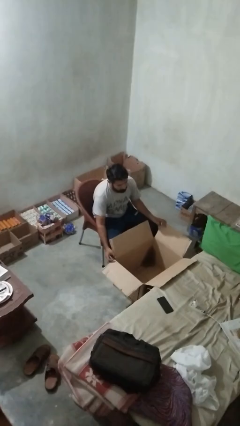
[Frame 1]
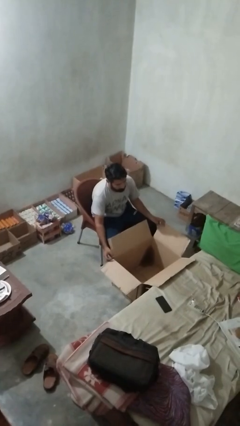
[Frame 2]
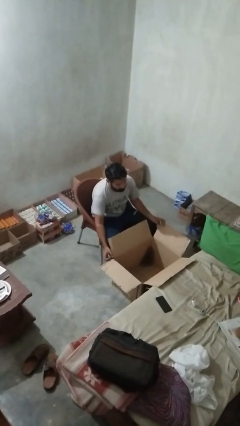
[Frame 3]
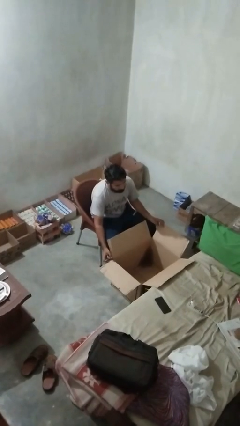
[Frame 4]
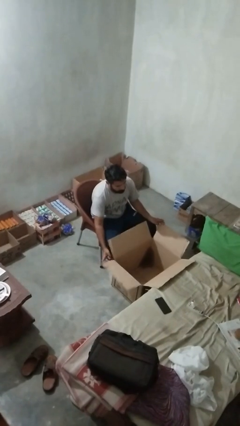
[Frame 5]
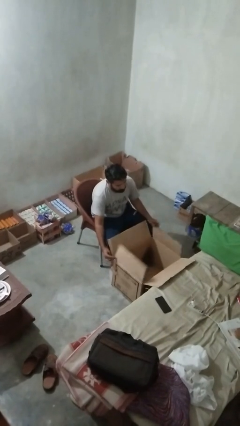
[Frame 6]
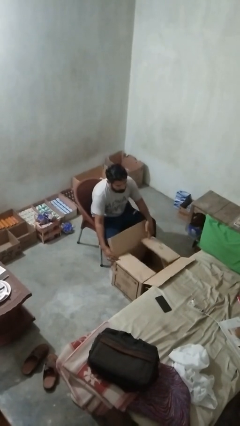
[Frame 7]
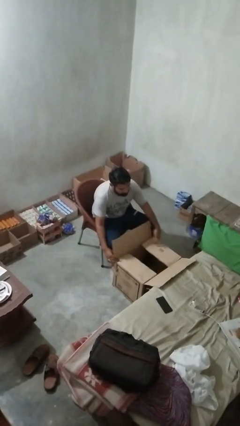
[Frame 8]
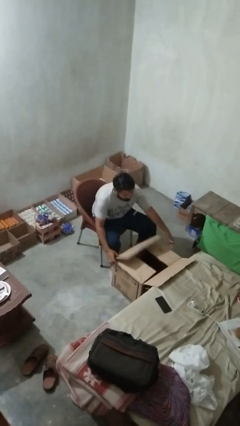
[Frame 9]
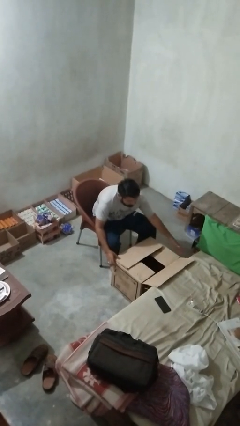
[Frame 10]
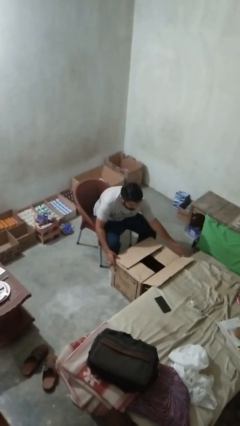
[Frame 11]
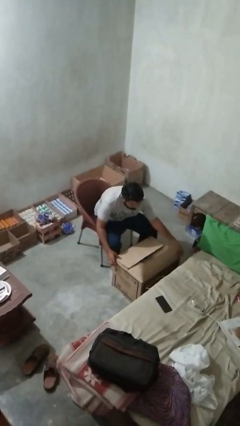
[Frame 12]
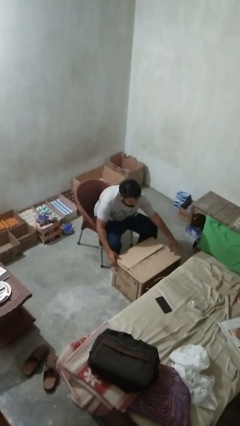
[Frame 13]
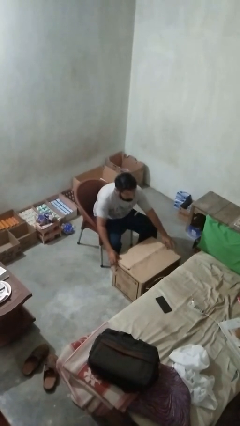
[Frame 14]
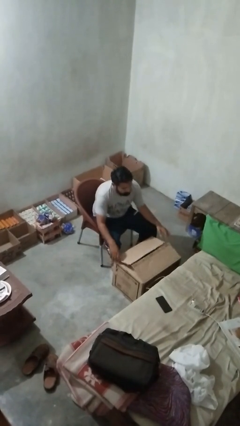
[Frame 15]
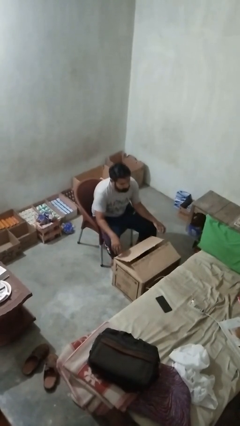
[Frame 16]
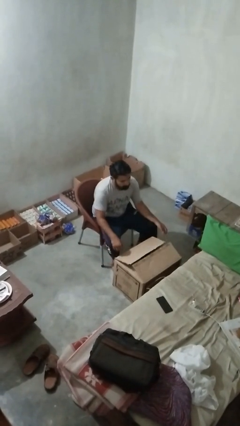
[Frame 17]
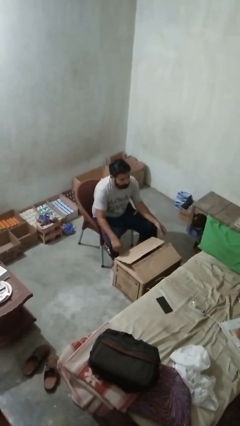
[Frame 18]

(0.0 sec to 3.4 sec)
person closes box

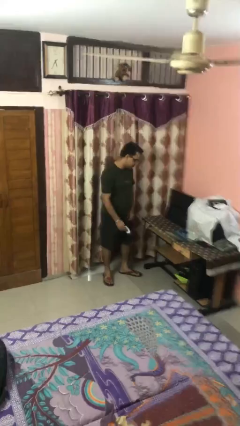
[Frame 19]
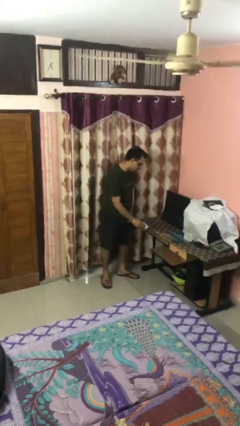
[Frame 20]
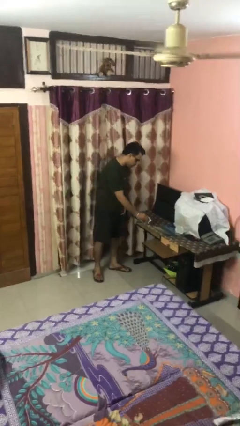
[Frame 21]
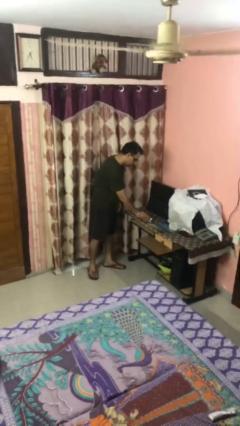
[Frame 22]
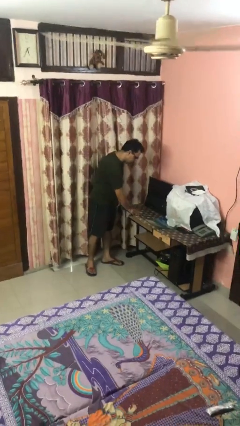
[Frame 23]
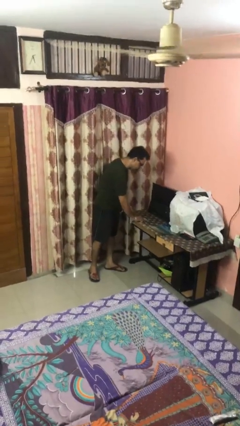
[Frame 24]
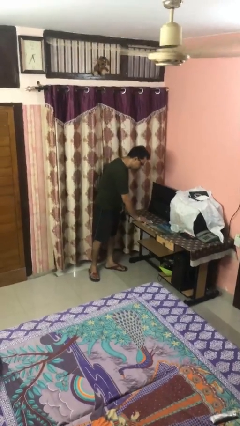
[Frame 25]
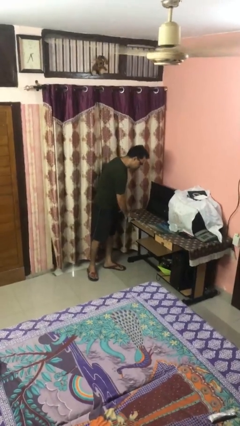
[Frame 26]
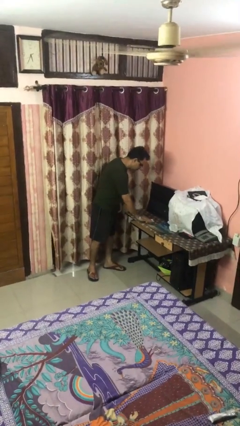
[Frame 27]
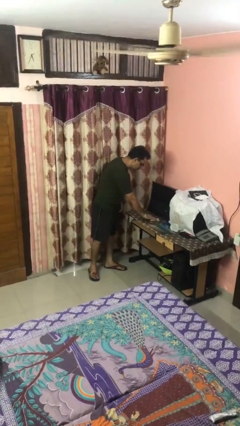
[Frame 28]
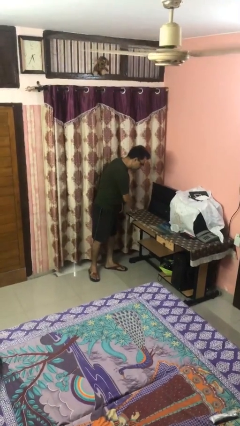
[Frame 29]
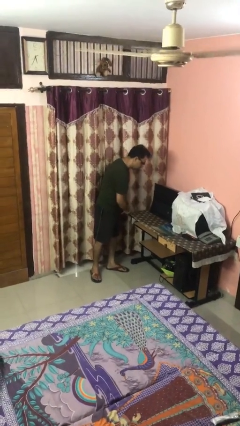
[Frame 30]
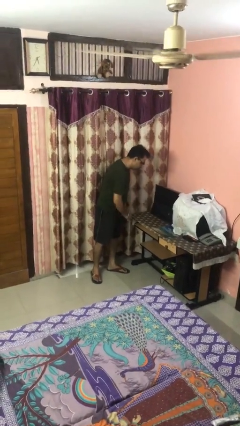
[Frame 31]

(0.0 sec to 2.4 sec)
person cleans table with rag

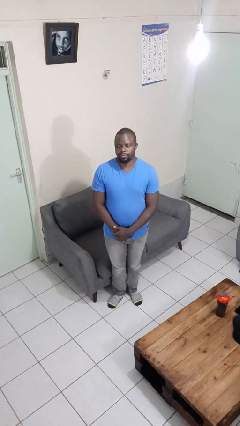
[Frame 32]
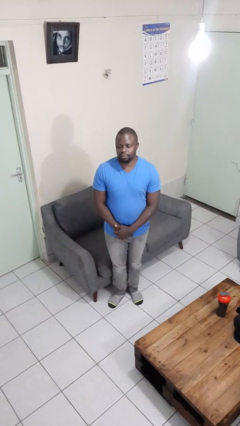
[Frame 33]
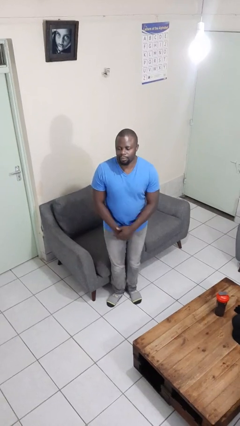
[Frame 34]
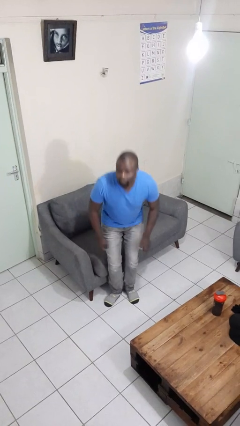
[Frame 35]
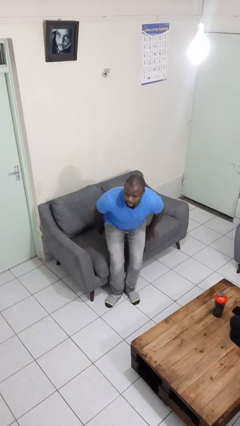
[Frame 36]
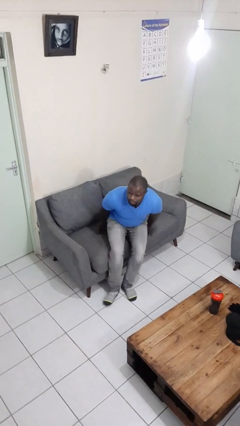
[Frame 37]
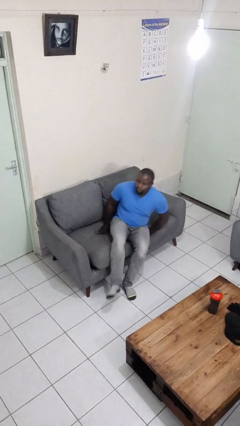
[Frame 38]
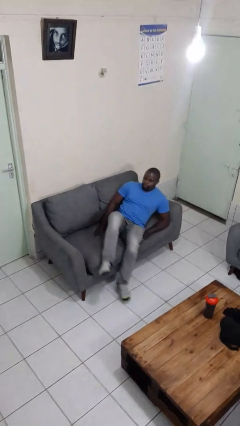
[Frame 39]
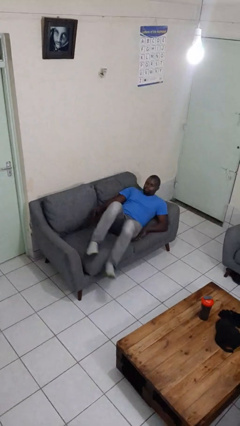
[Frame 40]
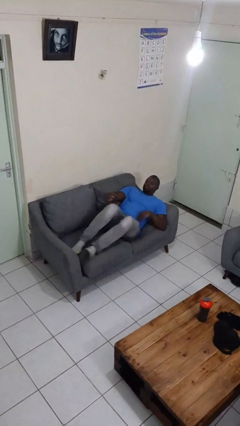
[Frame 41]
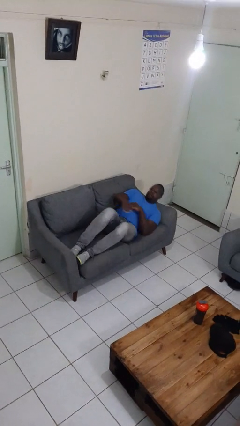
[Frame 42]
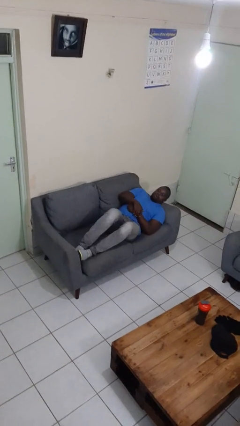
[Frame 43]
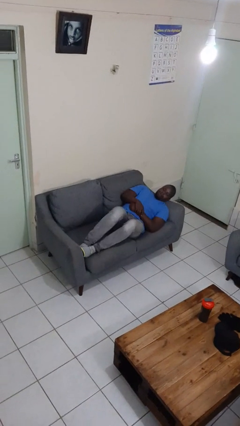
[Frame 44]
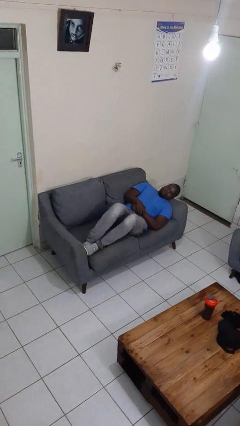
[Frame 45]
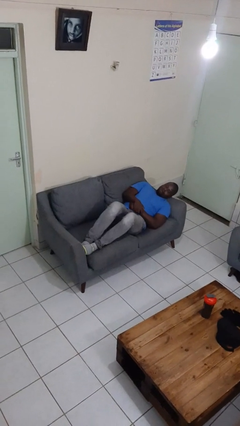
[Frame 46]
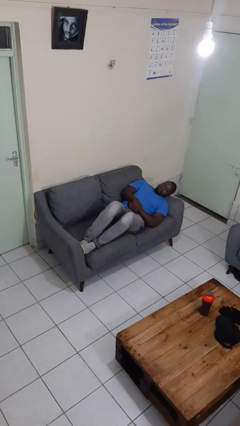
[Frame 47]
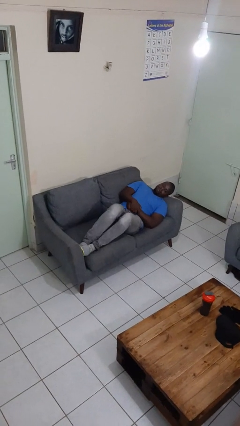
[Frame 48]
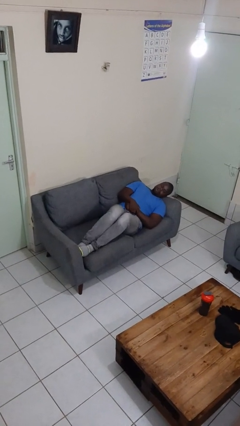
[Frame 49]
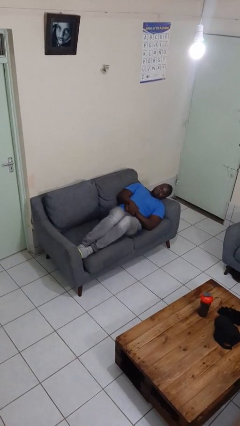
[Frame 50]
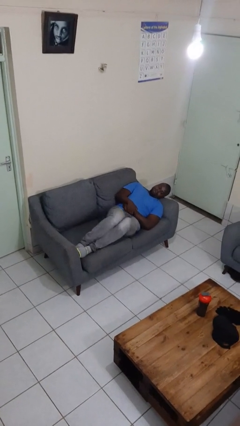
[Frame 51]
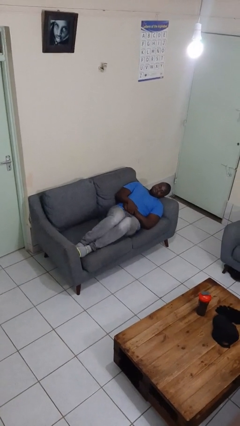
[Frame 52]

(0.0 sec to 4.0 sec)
person lies down on couch

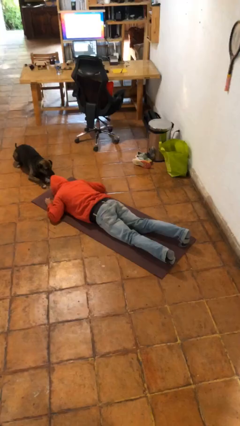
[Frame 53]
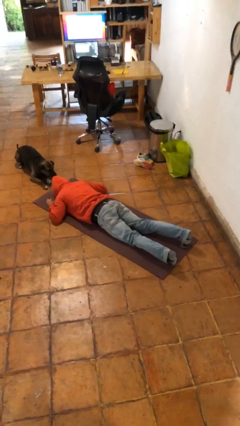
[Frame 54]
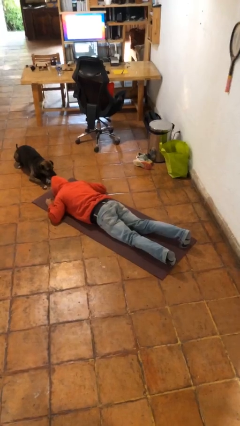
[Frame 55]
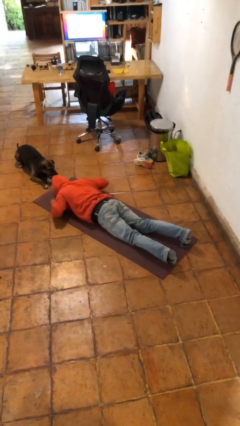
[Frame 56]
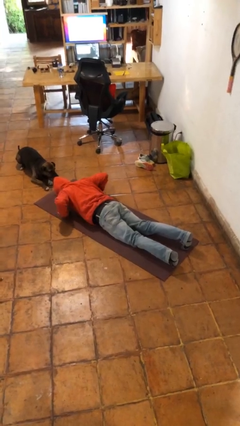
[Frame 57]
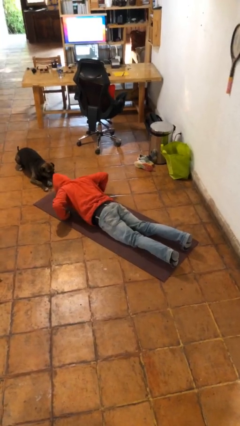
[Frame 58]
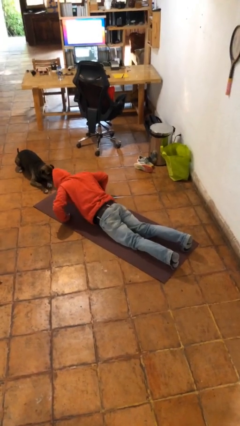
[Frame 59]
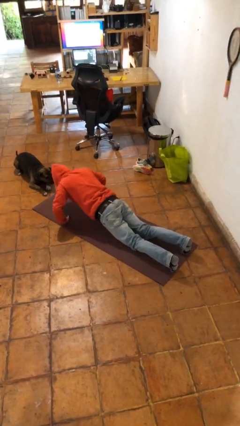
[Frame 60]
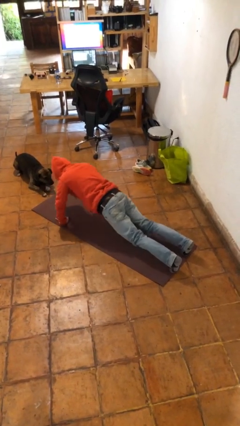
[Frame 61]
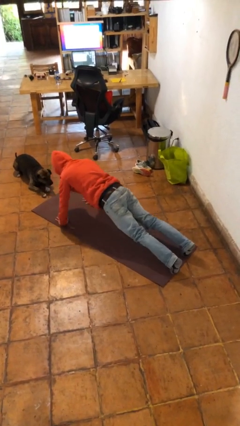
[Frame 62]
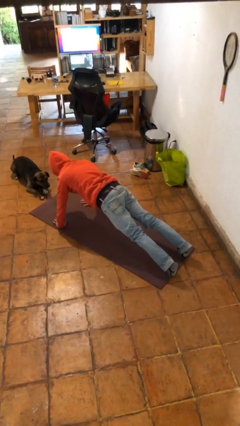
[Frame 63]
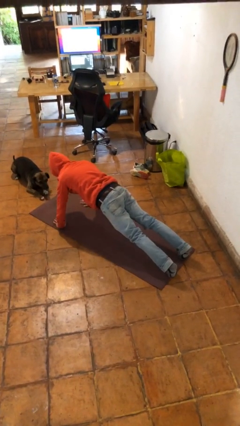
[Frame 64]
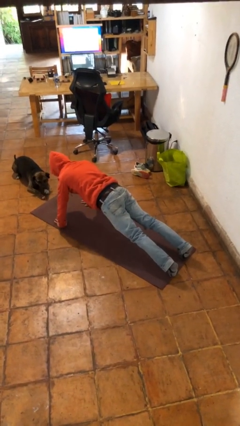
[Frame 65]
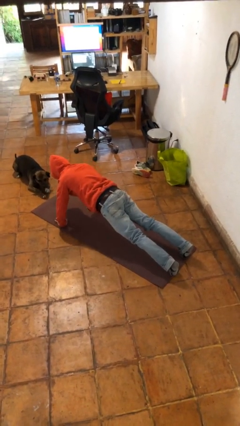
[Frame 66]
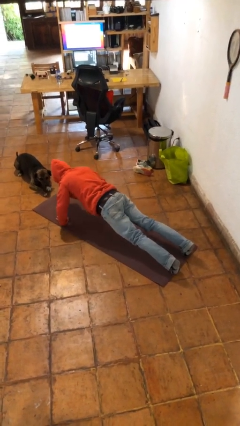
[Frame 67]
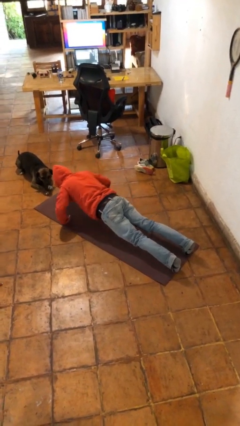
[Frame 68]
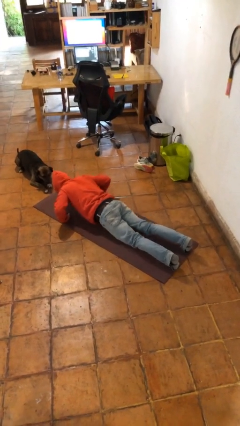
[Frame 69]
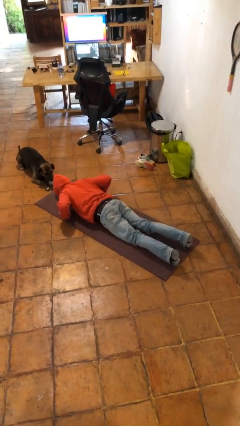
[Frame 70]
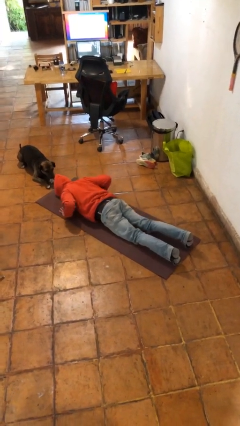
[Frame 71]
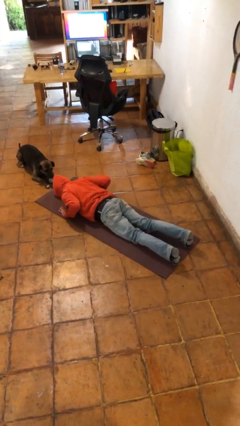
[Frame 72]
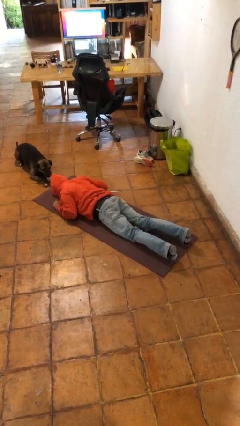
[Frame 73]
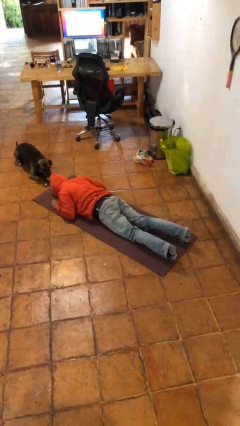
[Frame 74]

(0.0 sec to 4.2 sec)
person exercises with pushup

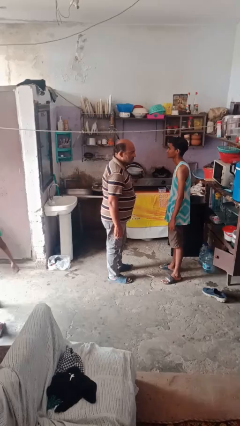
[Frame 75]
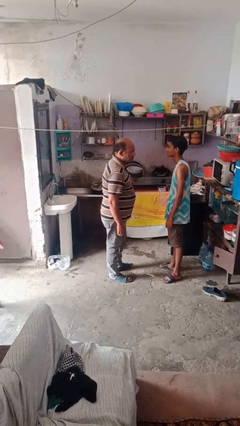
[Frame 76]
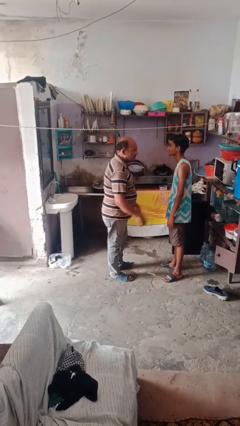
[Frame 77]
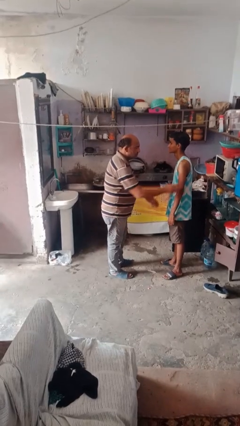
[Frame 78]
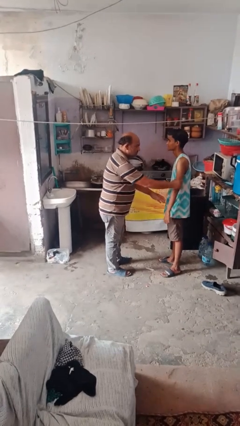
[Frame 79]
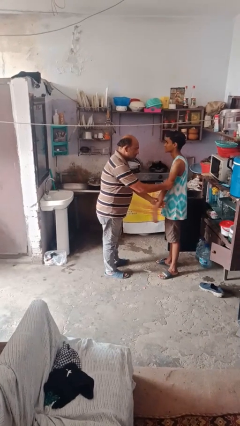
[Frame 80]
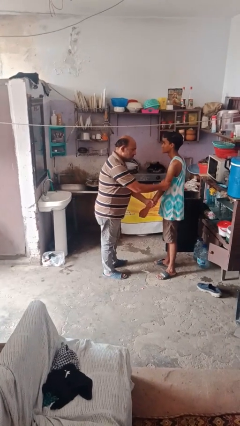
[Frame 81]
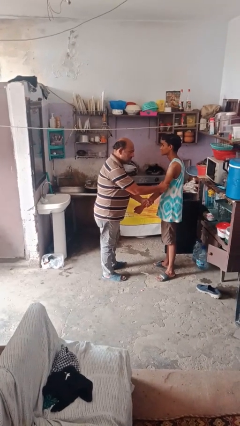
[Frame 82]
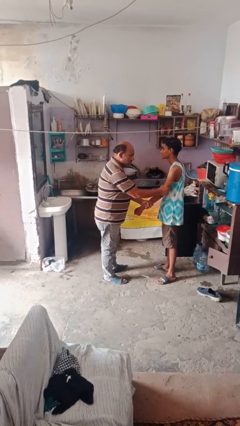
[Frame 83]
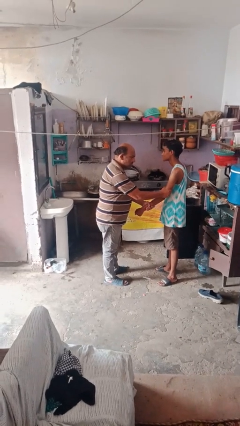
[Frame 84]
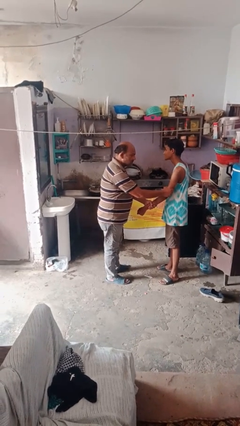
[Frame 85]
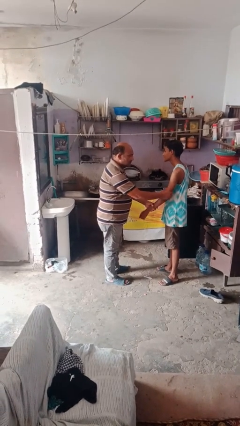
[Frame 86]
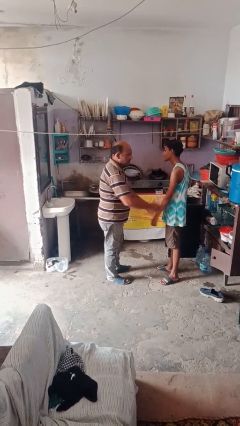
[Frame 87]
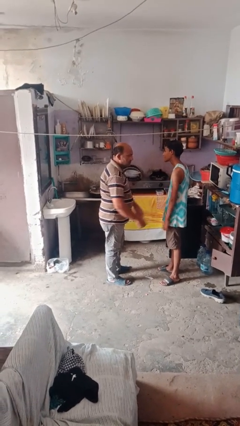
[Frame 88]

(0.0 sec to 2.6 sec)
person grabs person by forearm

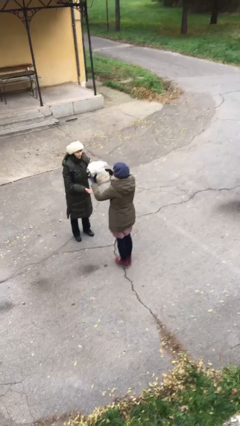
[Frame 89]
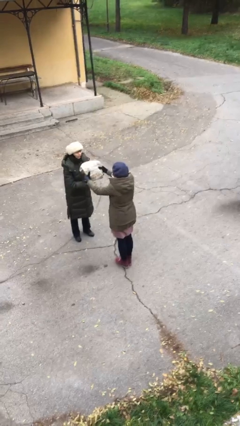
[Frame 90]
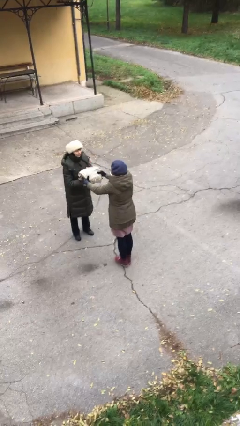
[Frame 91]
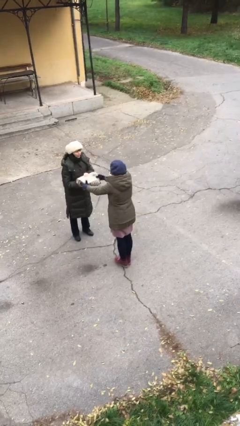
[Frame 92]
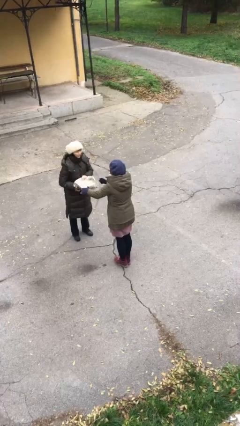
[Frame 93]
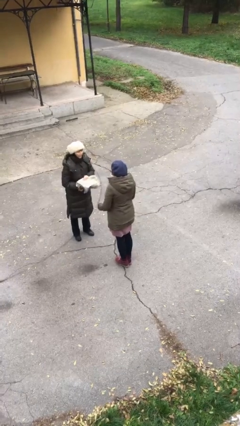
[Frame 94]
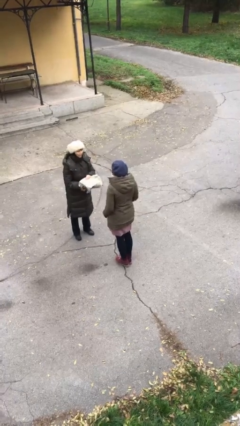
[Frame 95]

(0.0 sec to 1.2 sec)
person transfers object to person
